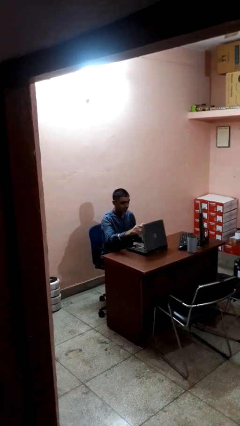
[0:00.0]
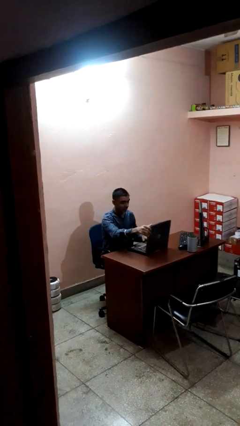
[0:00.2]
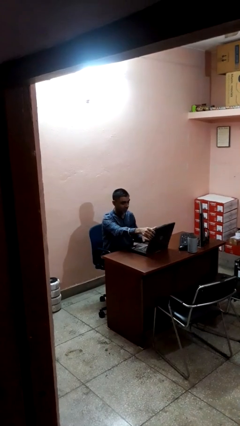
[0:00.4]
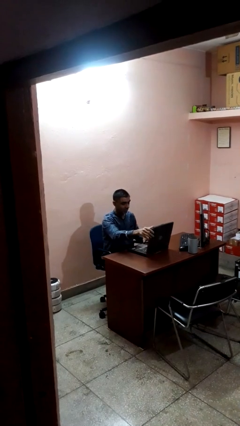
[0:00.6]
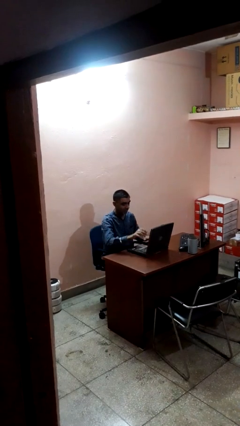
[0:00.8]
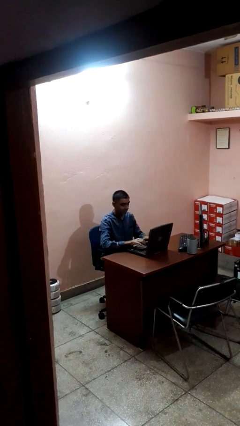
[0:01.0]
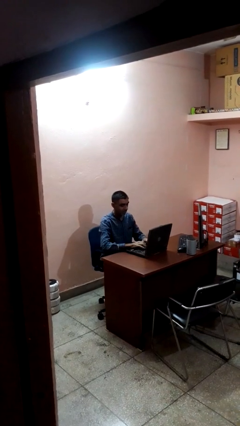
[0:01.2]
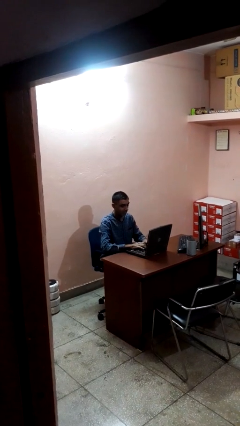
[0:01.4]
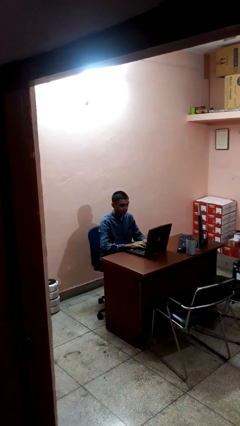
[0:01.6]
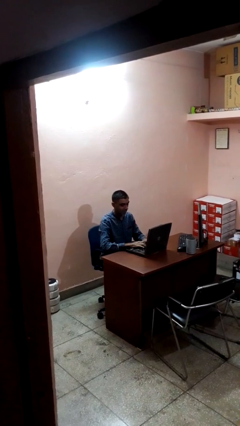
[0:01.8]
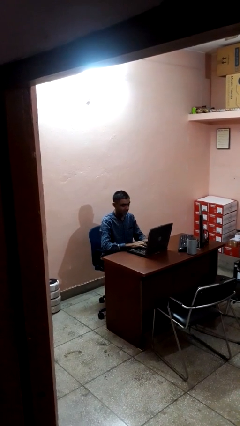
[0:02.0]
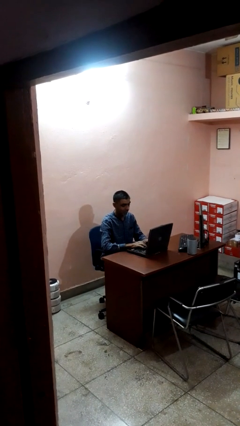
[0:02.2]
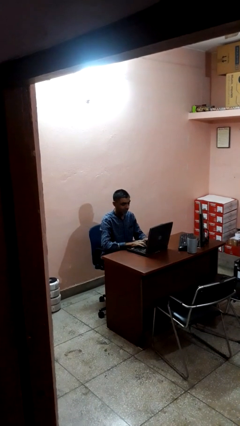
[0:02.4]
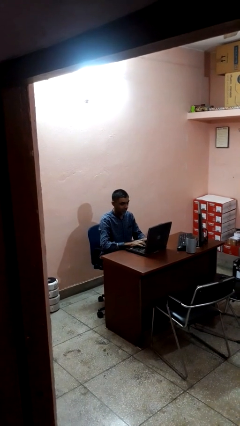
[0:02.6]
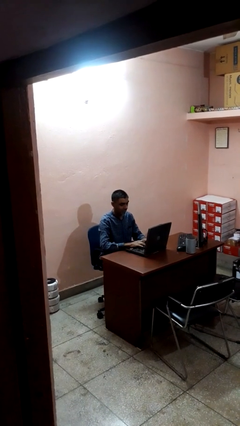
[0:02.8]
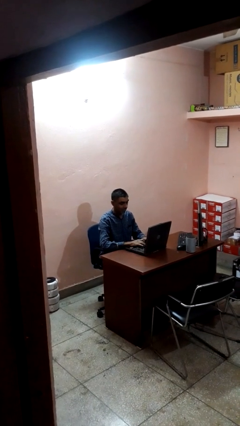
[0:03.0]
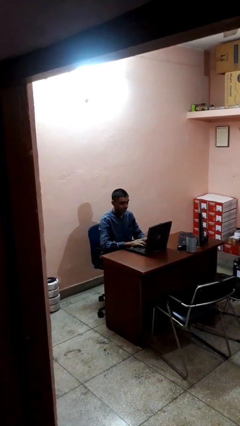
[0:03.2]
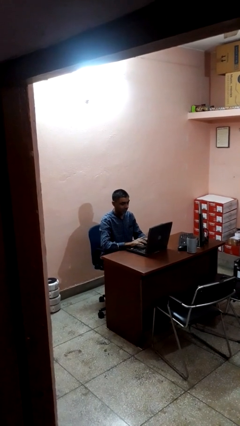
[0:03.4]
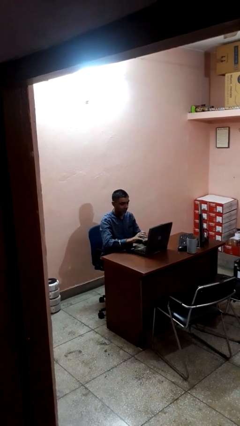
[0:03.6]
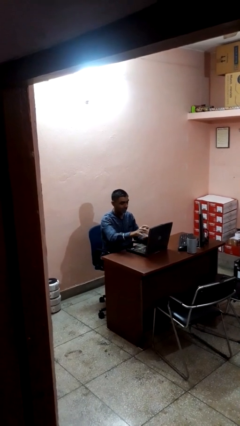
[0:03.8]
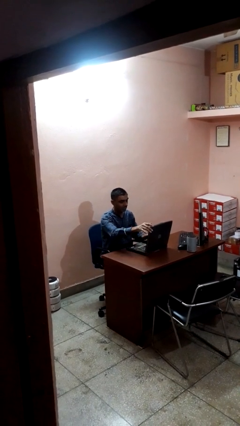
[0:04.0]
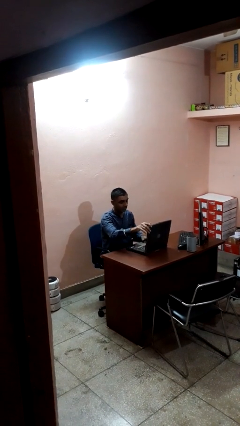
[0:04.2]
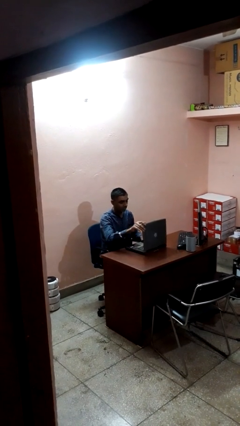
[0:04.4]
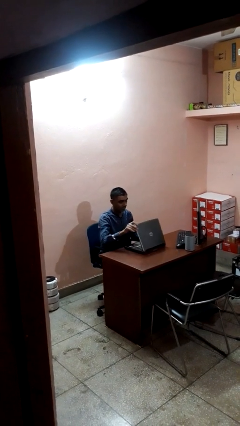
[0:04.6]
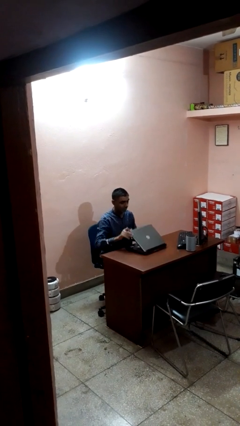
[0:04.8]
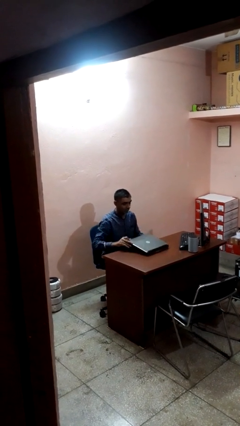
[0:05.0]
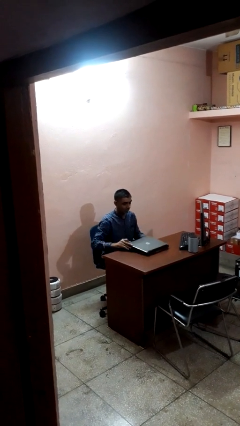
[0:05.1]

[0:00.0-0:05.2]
person interacts with laptop

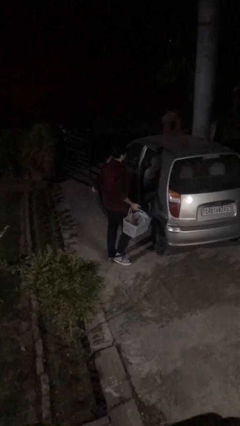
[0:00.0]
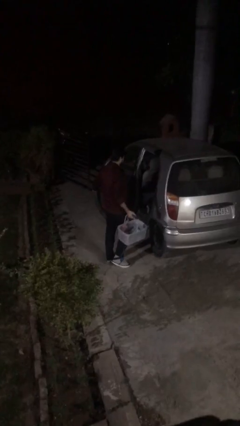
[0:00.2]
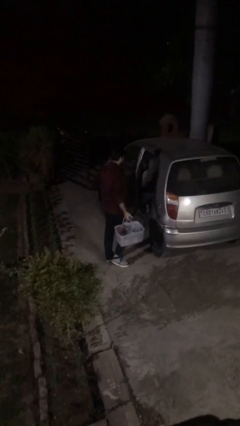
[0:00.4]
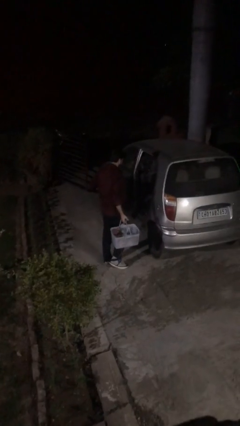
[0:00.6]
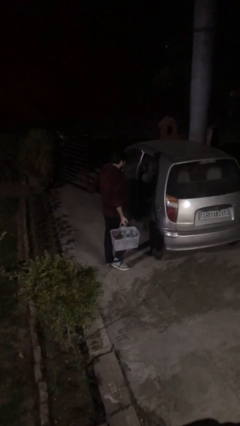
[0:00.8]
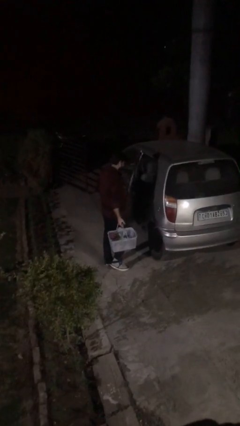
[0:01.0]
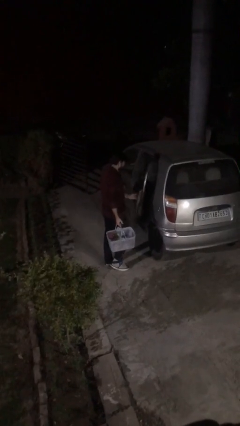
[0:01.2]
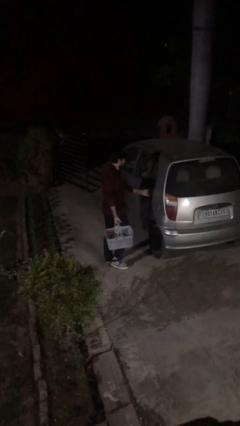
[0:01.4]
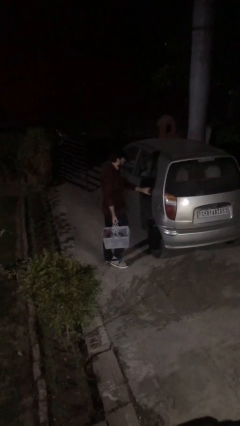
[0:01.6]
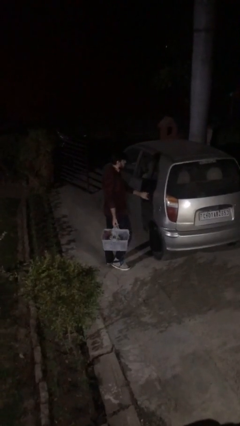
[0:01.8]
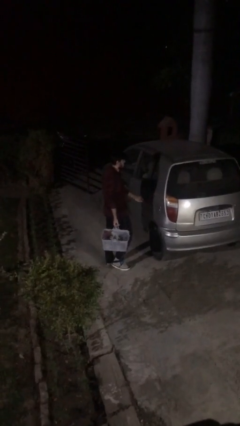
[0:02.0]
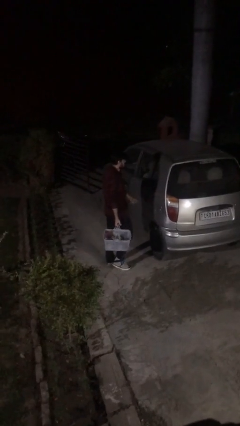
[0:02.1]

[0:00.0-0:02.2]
person closes car door

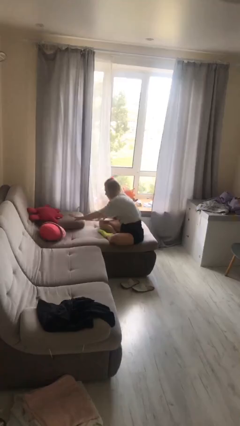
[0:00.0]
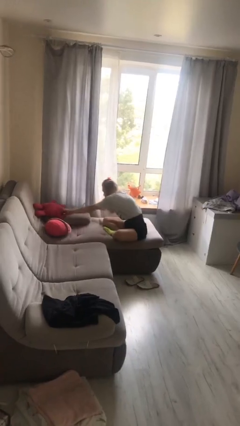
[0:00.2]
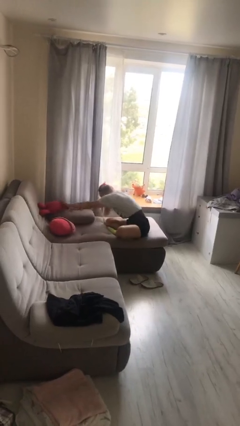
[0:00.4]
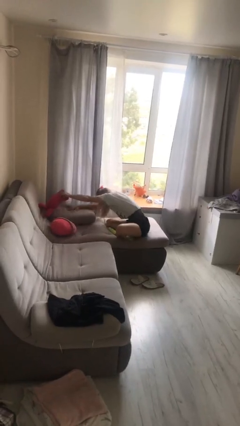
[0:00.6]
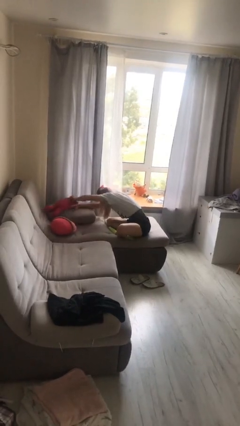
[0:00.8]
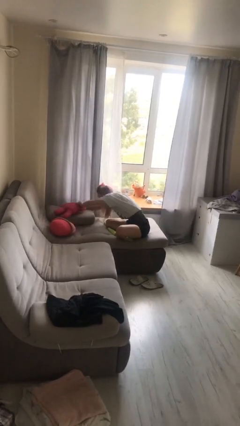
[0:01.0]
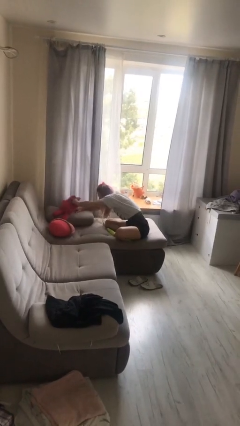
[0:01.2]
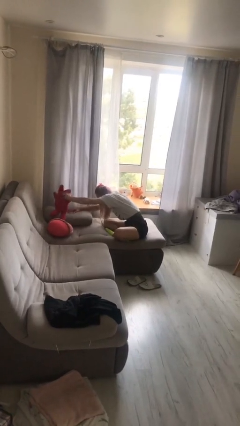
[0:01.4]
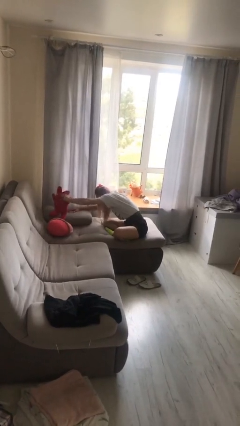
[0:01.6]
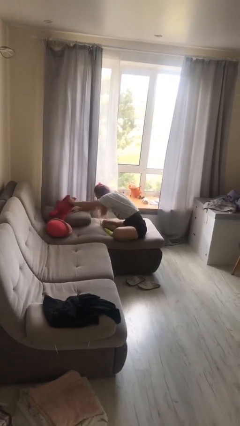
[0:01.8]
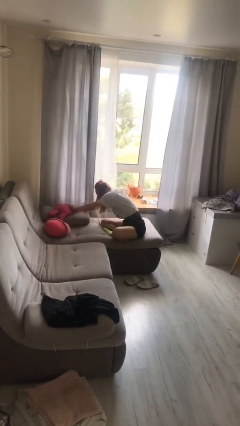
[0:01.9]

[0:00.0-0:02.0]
person searches in couch

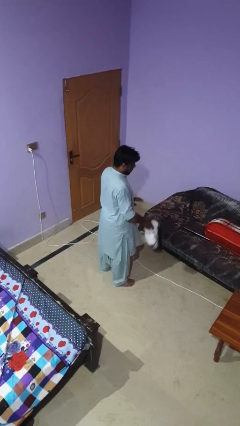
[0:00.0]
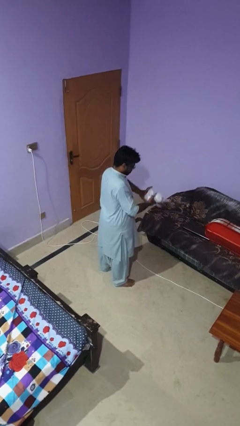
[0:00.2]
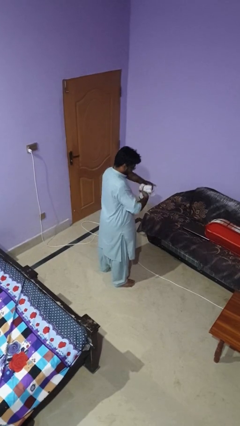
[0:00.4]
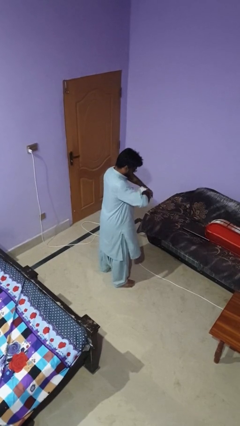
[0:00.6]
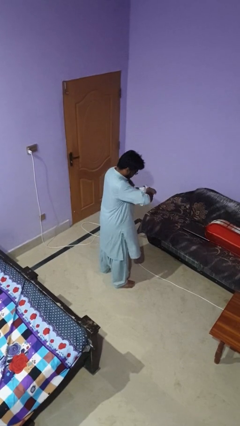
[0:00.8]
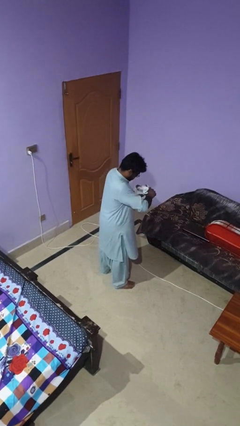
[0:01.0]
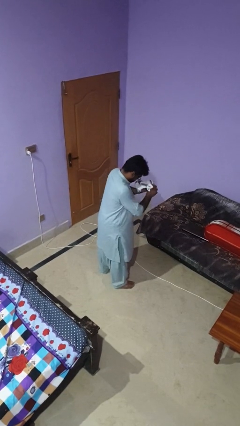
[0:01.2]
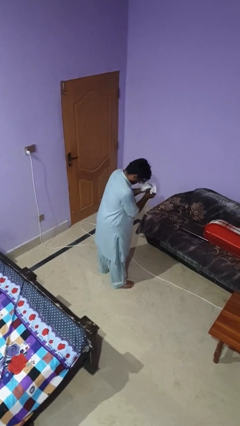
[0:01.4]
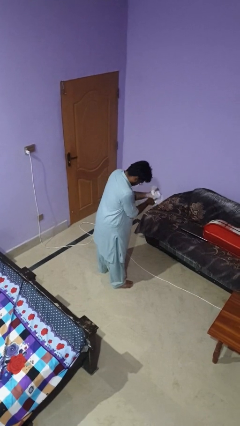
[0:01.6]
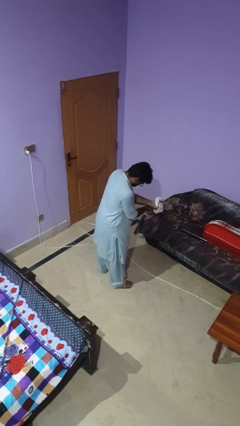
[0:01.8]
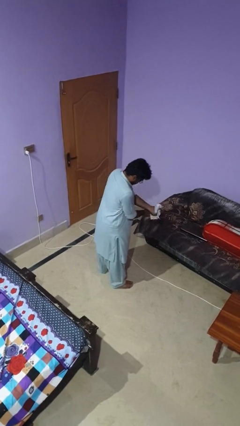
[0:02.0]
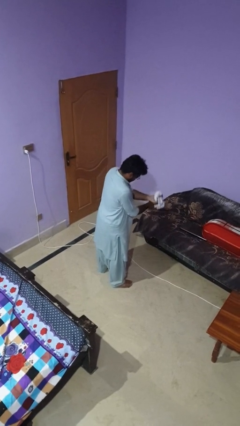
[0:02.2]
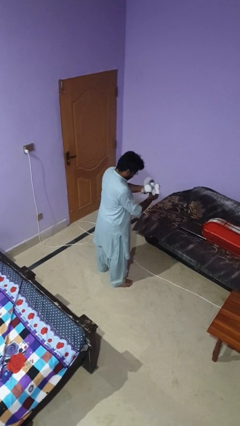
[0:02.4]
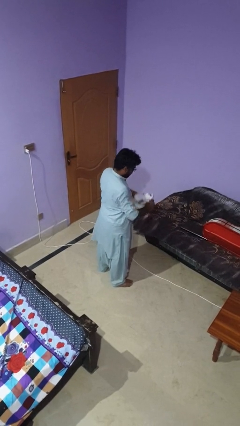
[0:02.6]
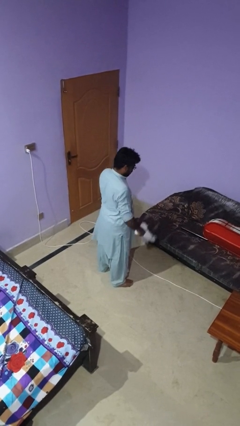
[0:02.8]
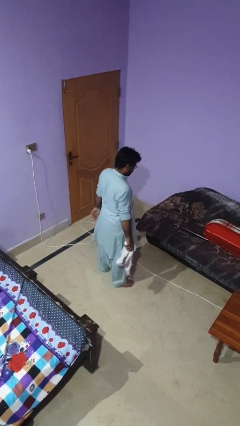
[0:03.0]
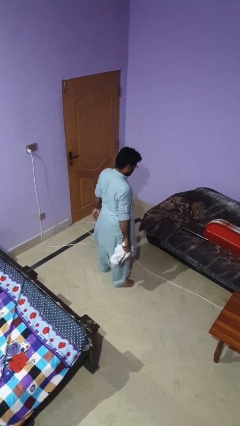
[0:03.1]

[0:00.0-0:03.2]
person squeezes object

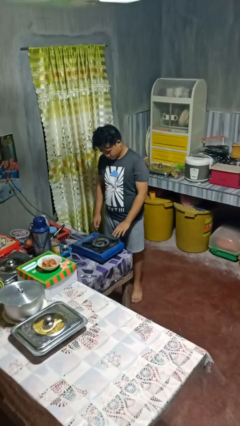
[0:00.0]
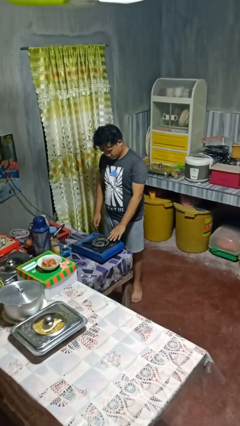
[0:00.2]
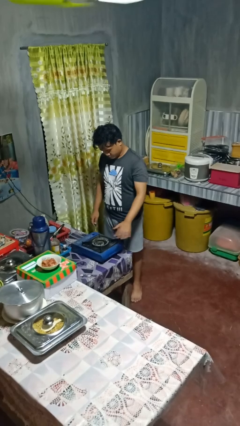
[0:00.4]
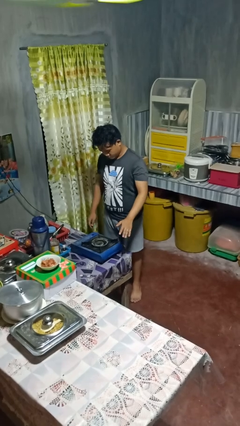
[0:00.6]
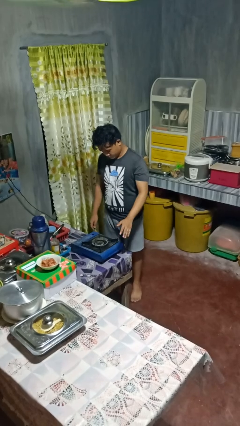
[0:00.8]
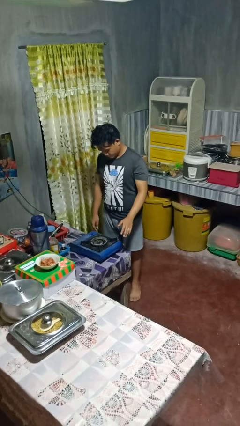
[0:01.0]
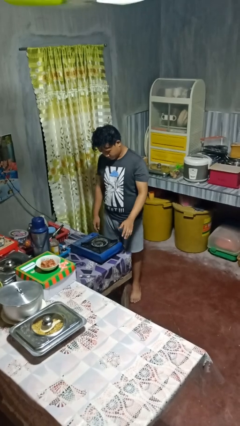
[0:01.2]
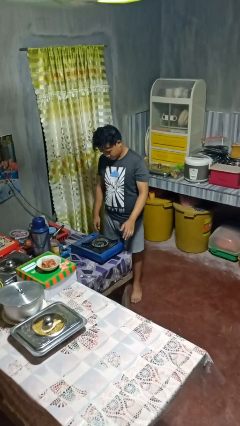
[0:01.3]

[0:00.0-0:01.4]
person burns hand

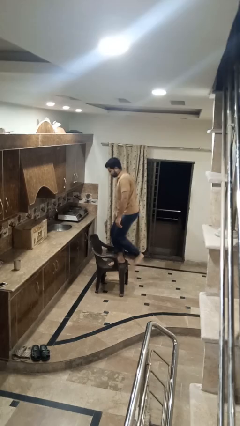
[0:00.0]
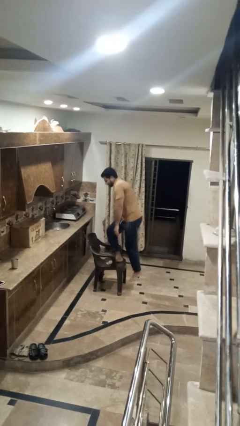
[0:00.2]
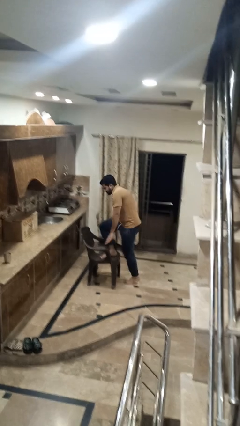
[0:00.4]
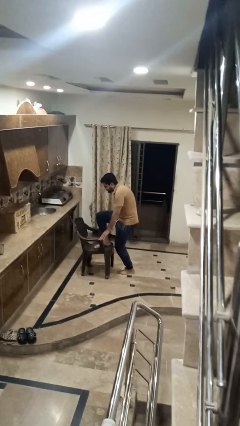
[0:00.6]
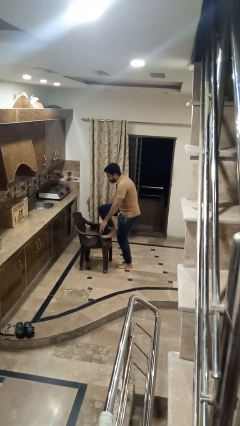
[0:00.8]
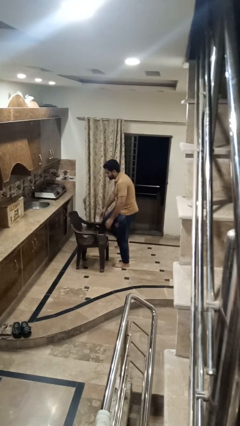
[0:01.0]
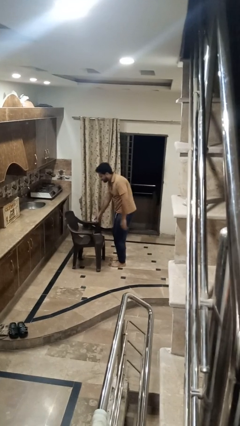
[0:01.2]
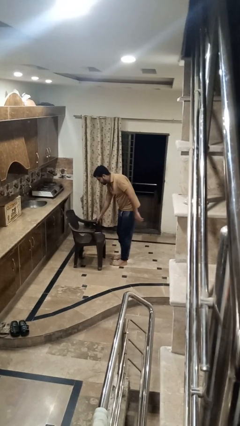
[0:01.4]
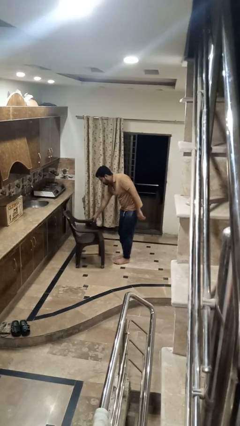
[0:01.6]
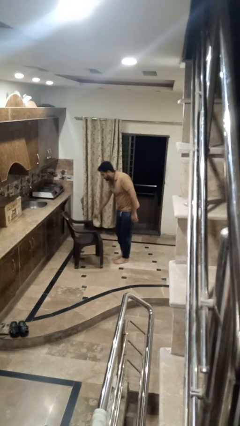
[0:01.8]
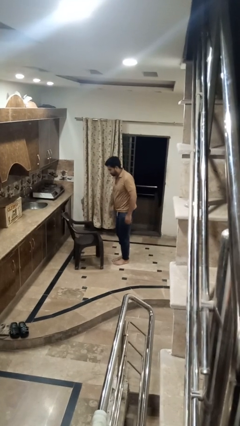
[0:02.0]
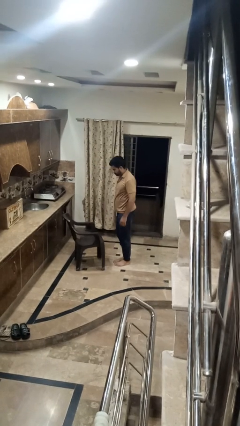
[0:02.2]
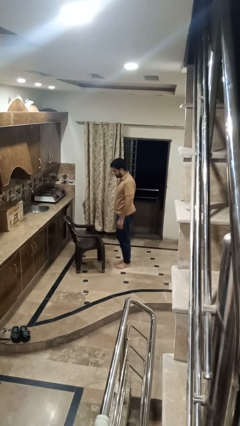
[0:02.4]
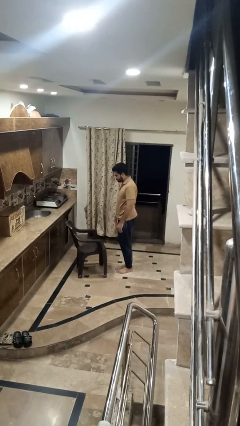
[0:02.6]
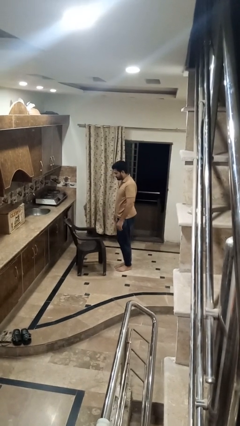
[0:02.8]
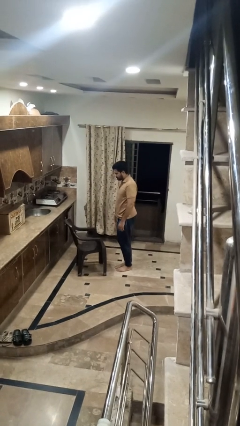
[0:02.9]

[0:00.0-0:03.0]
person climbs off chair

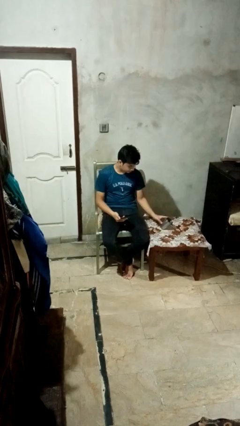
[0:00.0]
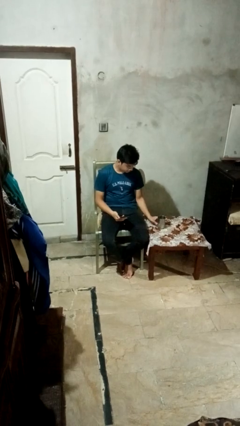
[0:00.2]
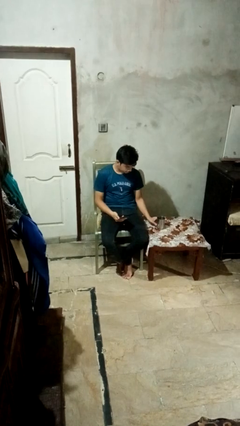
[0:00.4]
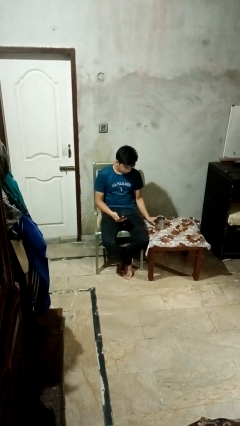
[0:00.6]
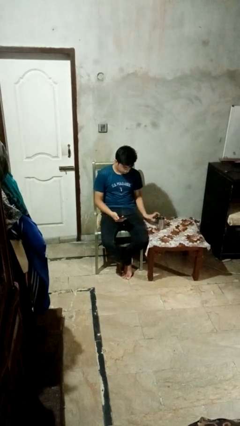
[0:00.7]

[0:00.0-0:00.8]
person sets upright glass
